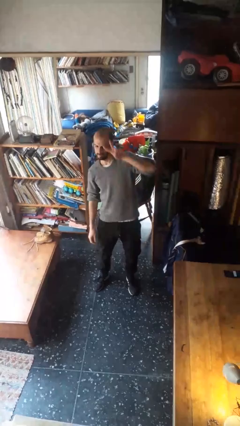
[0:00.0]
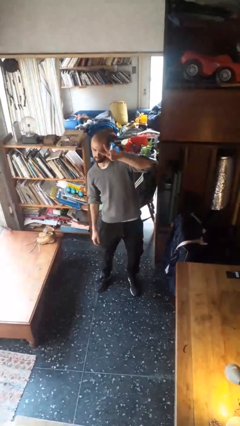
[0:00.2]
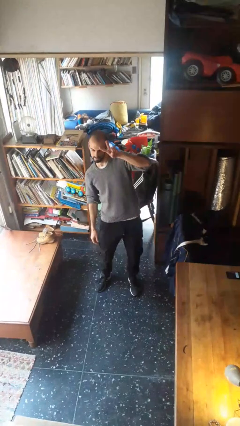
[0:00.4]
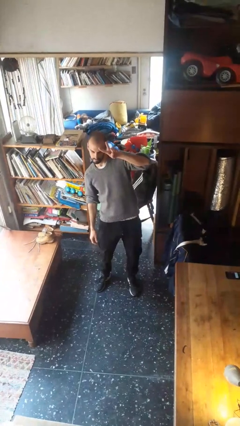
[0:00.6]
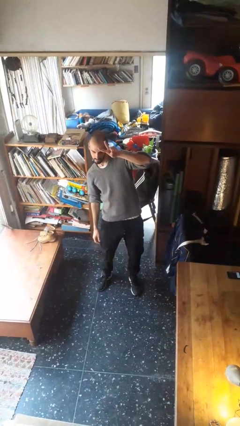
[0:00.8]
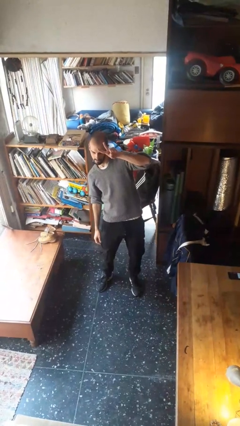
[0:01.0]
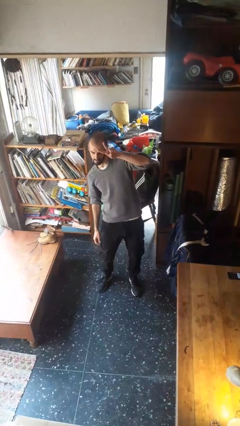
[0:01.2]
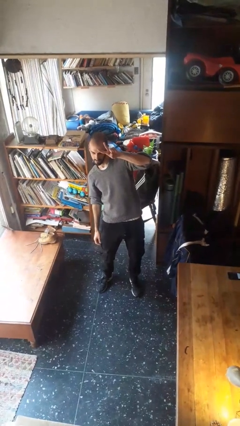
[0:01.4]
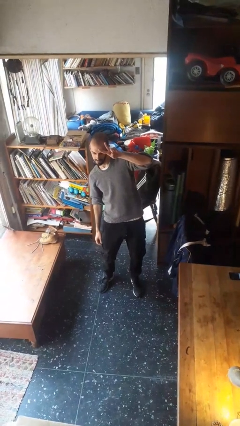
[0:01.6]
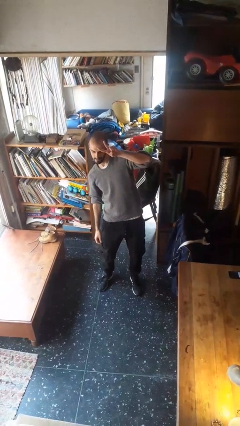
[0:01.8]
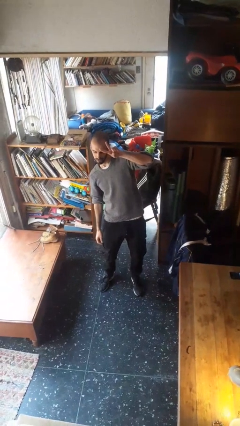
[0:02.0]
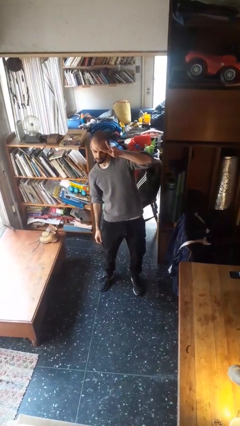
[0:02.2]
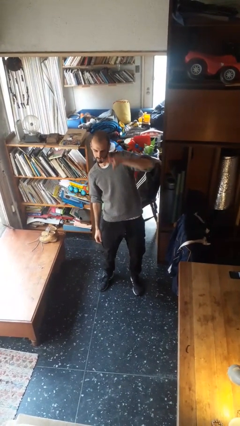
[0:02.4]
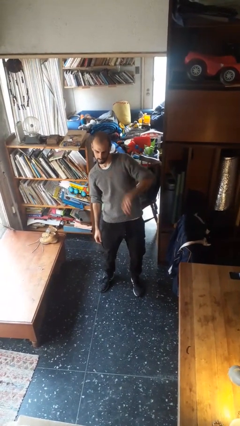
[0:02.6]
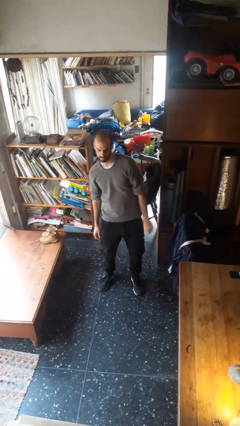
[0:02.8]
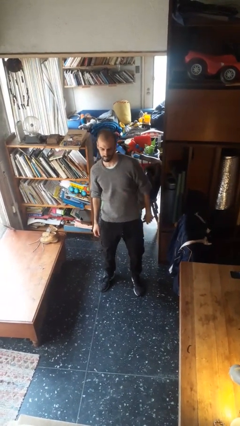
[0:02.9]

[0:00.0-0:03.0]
person gestures peace

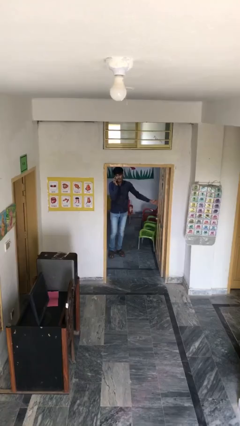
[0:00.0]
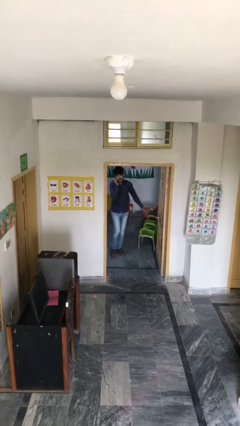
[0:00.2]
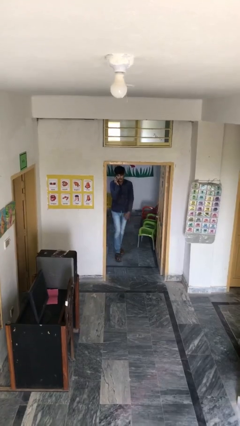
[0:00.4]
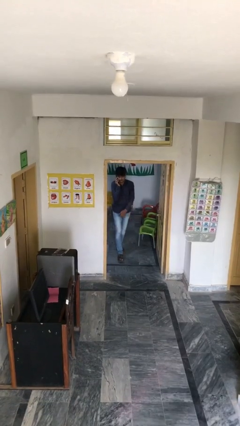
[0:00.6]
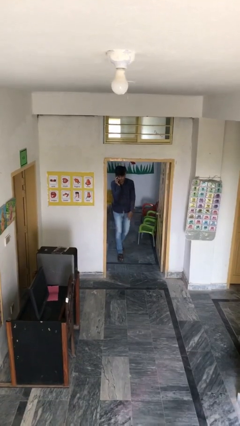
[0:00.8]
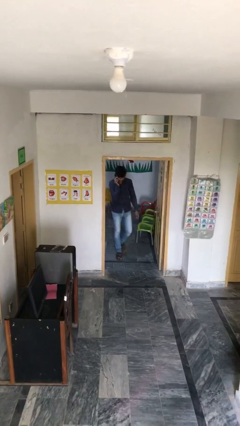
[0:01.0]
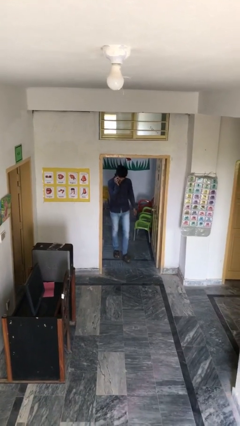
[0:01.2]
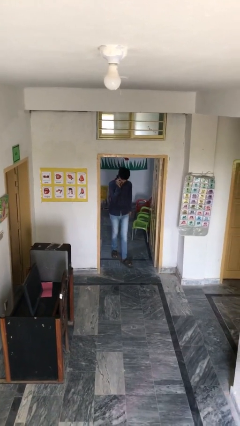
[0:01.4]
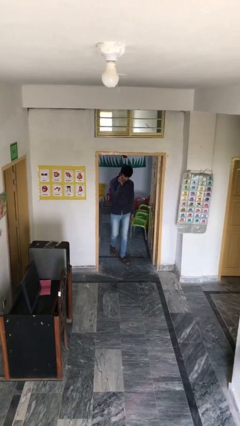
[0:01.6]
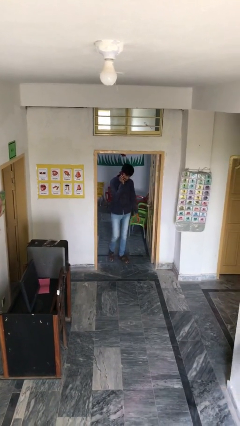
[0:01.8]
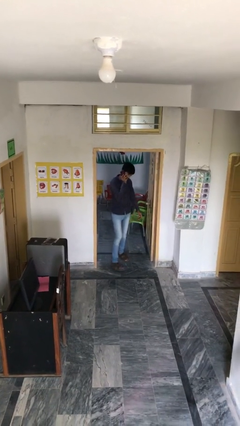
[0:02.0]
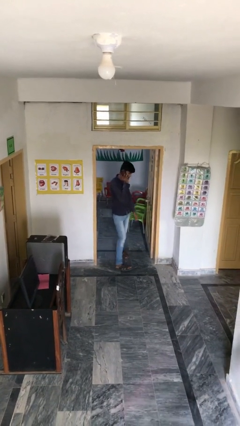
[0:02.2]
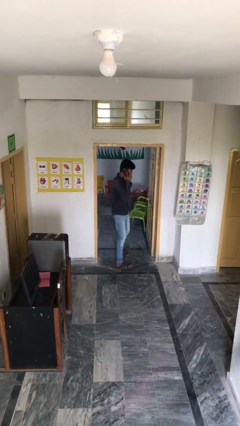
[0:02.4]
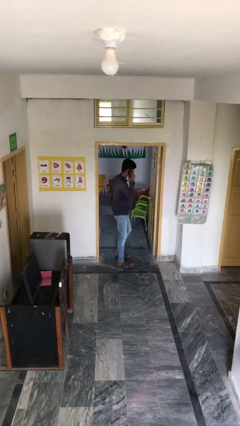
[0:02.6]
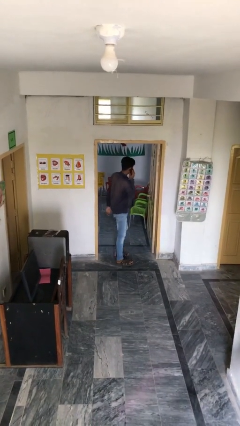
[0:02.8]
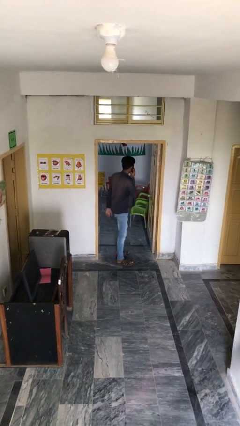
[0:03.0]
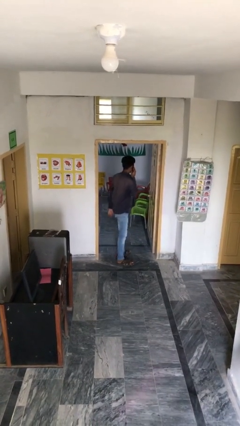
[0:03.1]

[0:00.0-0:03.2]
person enters scene through structure

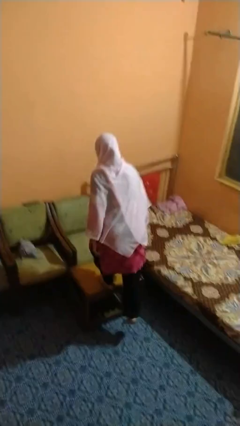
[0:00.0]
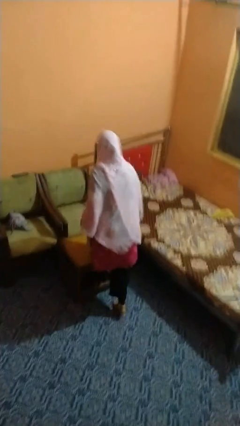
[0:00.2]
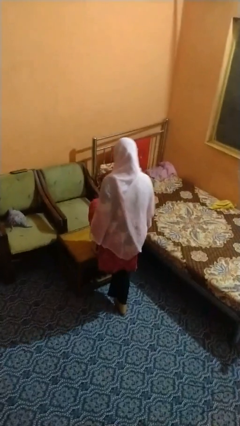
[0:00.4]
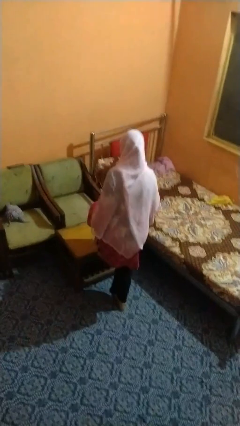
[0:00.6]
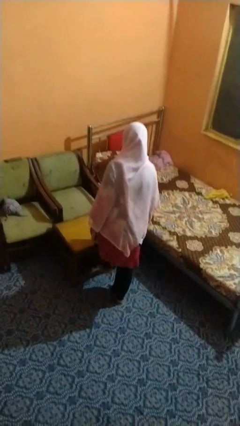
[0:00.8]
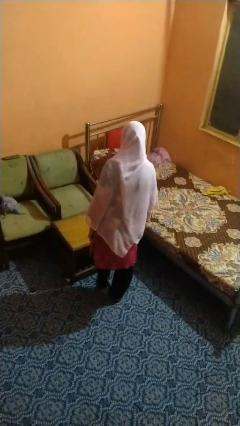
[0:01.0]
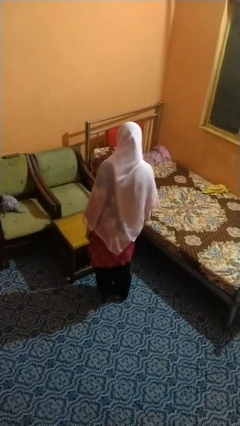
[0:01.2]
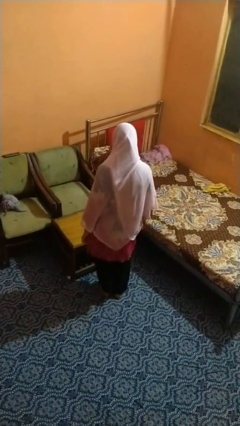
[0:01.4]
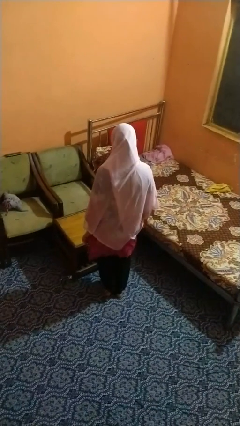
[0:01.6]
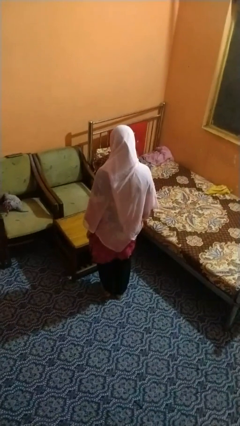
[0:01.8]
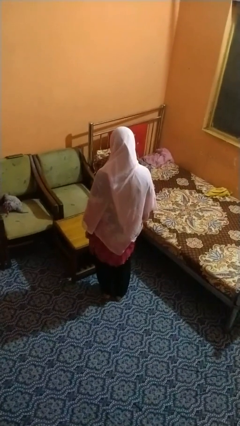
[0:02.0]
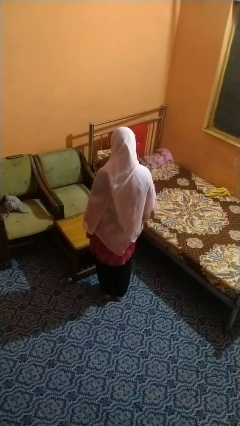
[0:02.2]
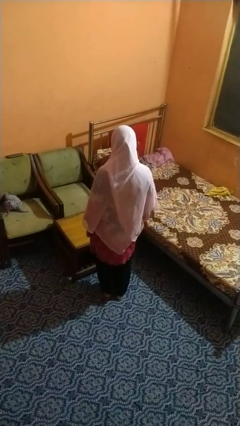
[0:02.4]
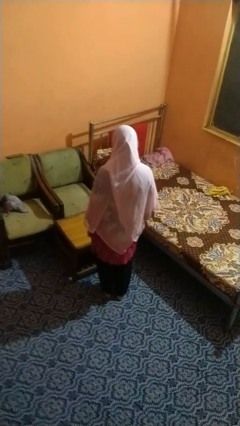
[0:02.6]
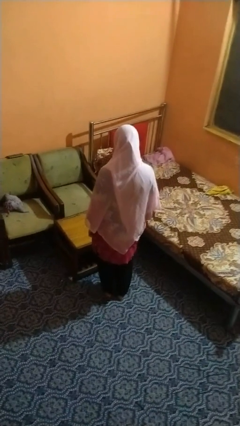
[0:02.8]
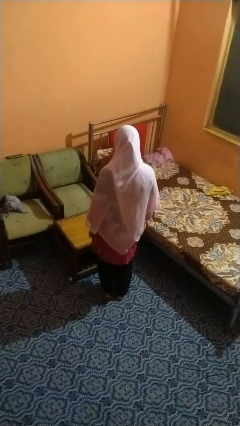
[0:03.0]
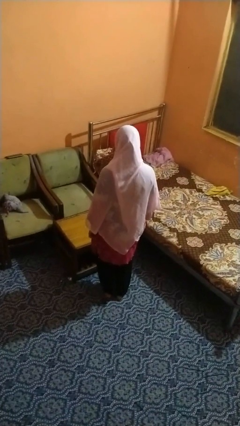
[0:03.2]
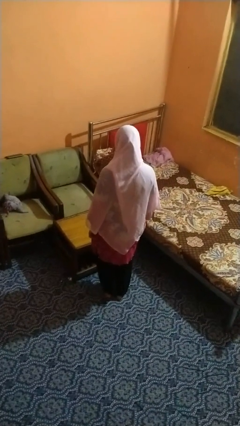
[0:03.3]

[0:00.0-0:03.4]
person climbs off table

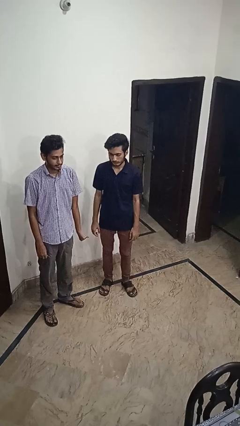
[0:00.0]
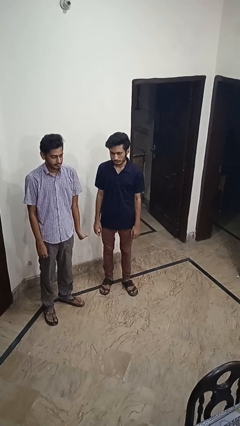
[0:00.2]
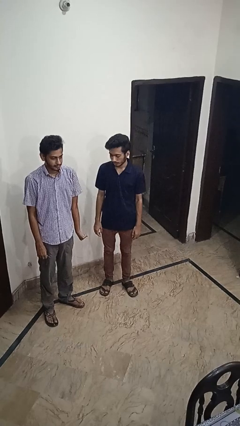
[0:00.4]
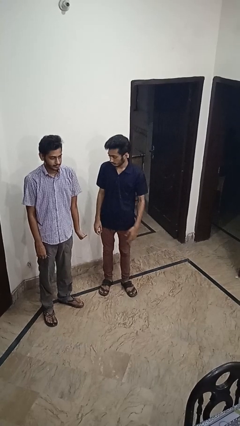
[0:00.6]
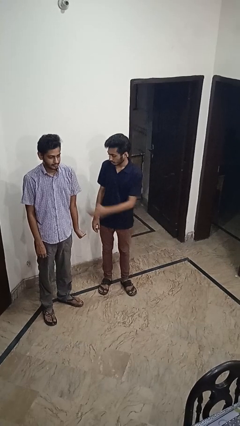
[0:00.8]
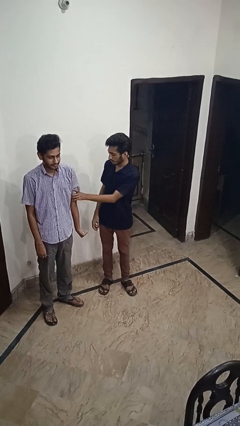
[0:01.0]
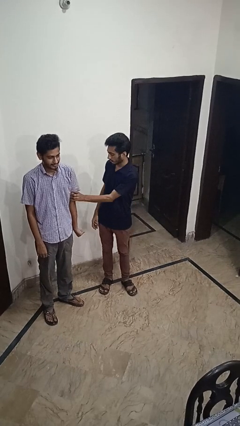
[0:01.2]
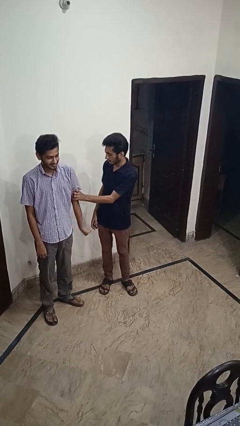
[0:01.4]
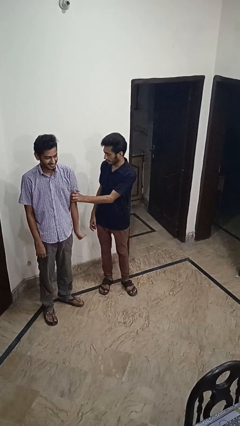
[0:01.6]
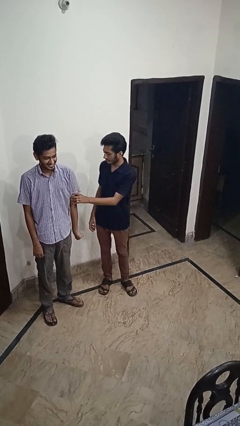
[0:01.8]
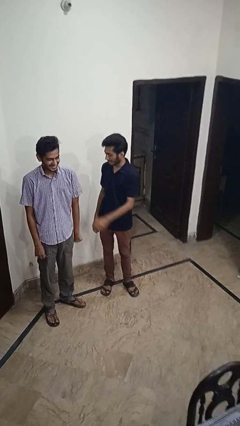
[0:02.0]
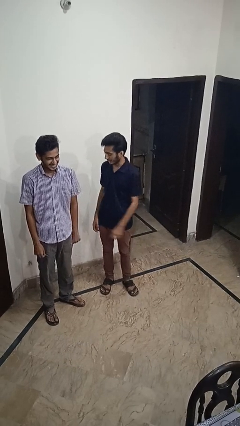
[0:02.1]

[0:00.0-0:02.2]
person grabs person by bicep

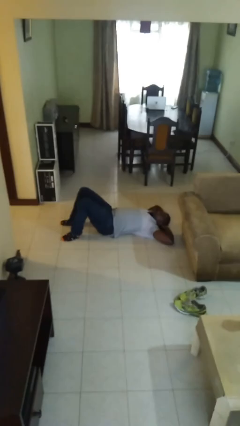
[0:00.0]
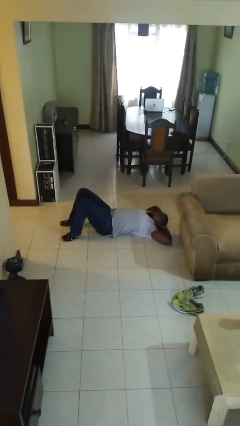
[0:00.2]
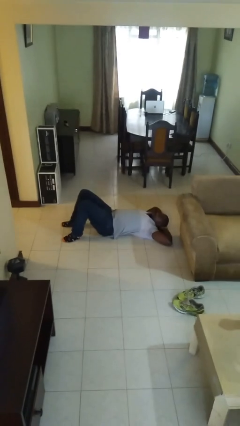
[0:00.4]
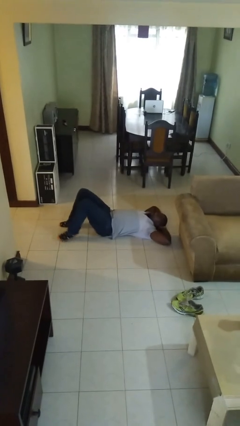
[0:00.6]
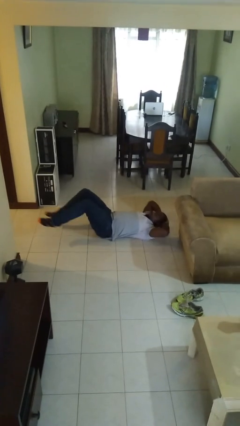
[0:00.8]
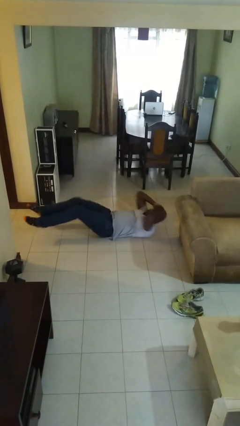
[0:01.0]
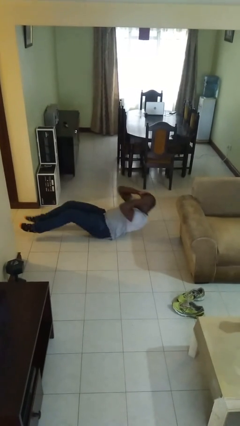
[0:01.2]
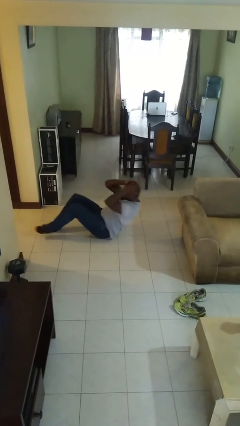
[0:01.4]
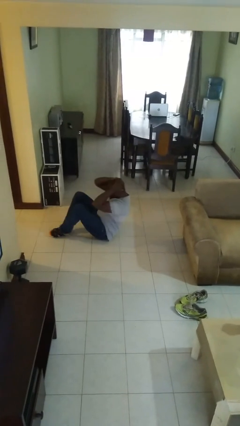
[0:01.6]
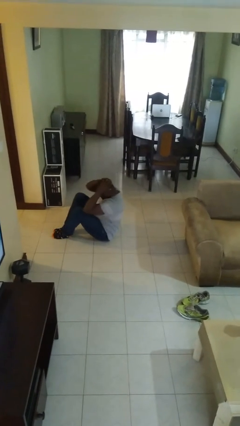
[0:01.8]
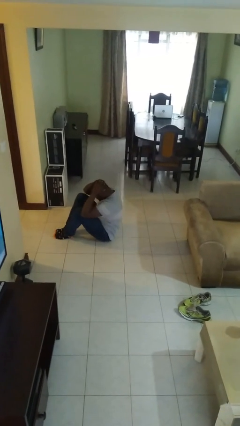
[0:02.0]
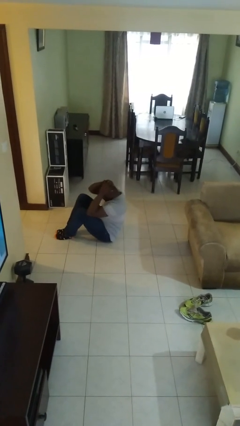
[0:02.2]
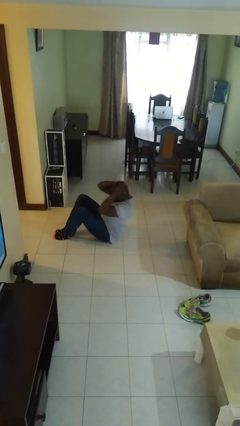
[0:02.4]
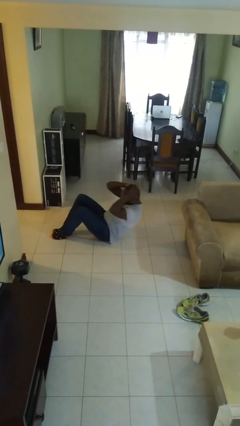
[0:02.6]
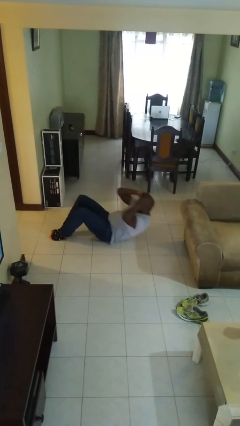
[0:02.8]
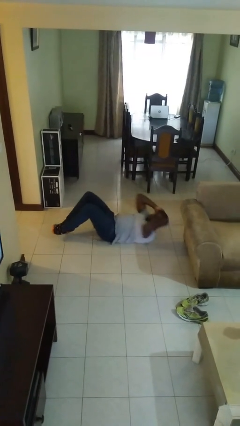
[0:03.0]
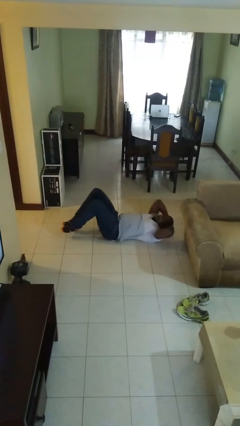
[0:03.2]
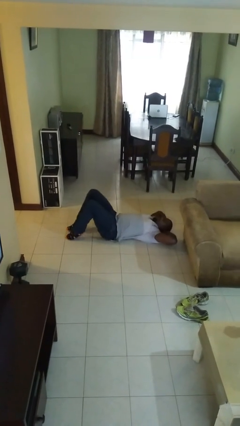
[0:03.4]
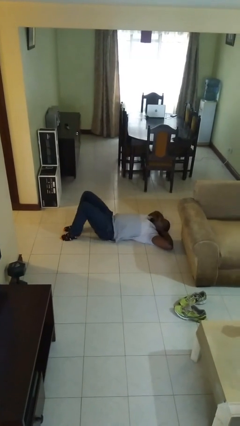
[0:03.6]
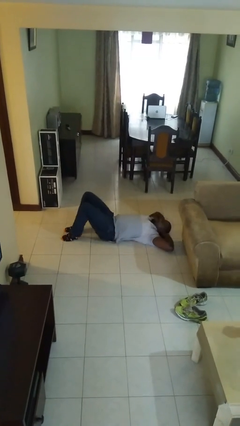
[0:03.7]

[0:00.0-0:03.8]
person exercises with situp

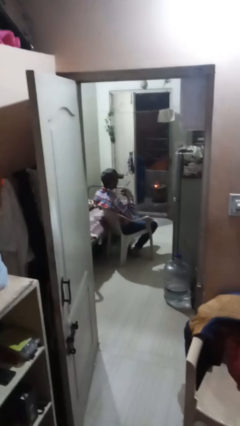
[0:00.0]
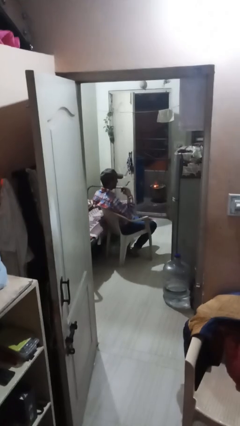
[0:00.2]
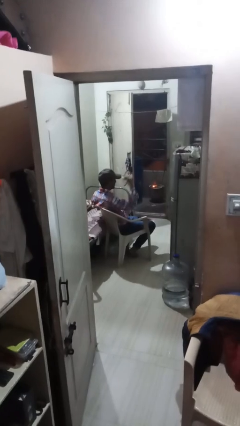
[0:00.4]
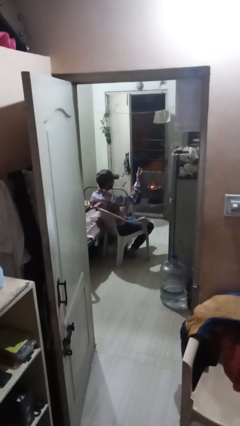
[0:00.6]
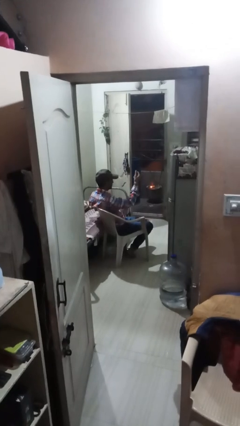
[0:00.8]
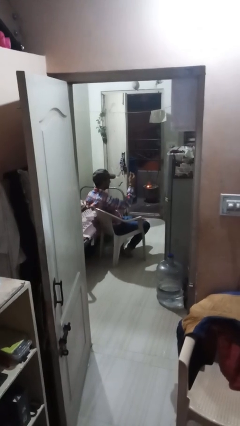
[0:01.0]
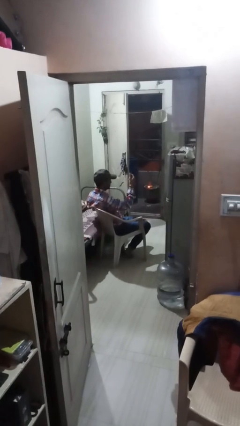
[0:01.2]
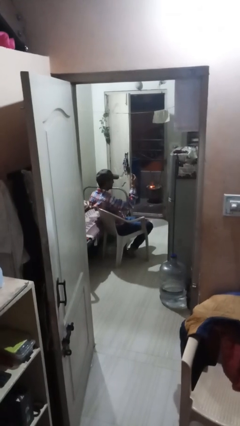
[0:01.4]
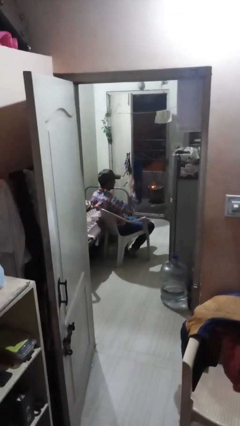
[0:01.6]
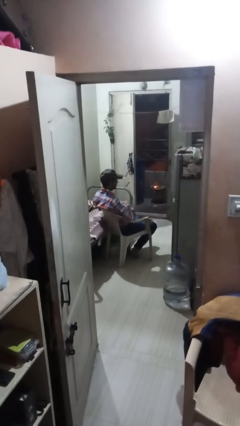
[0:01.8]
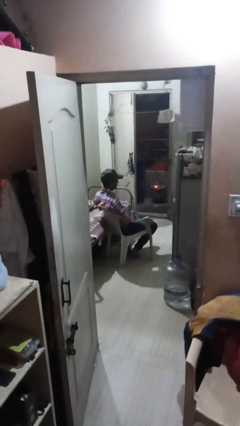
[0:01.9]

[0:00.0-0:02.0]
person snaps fingers
